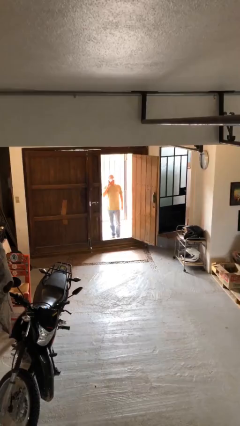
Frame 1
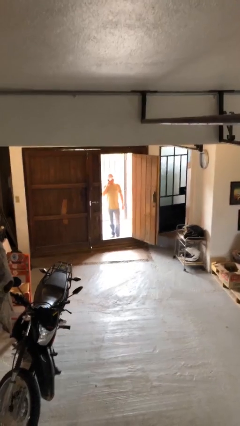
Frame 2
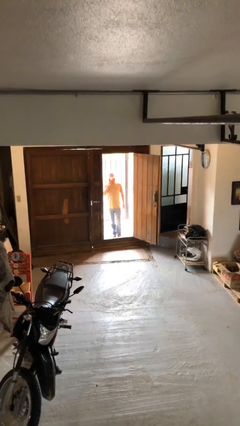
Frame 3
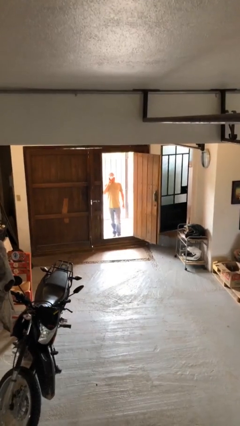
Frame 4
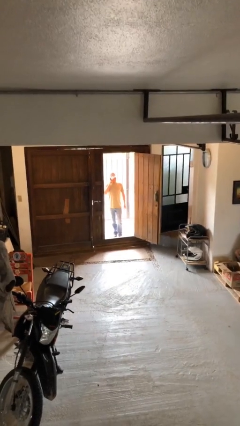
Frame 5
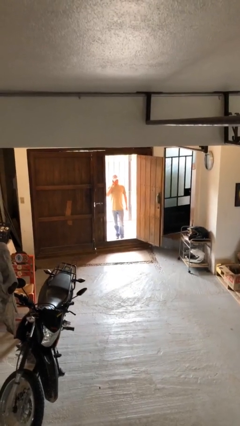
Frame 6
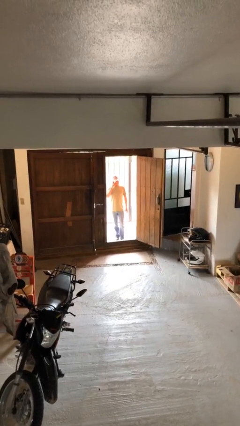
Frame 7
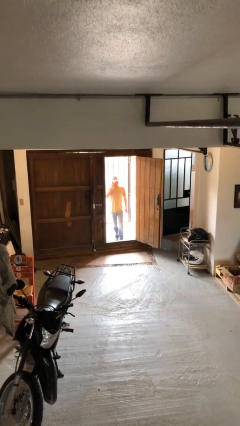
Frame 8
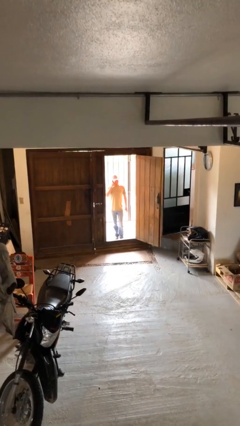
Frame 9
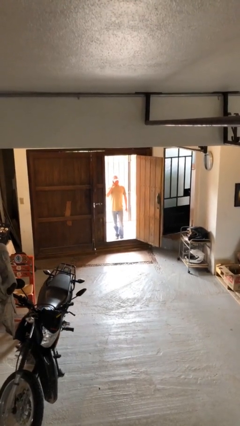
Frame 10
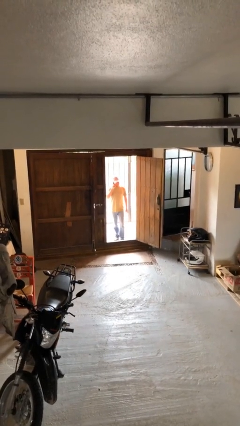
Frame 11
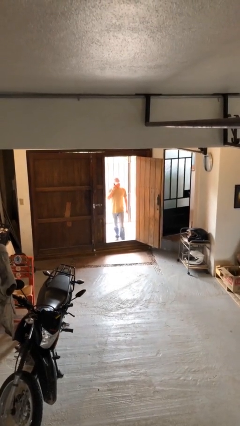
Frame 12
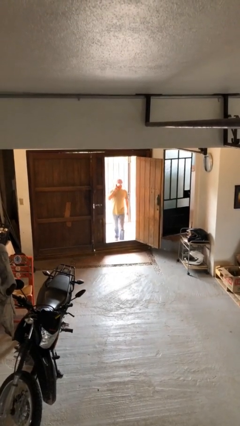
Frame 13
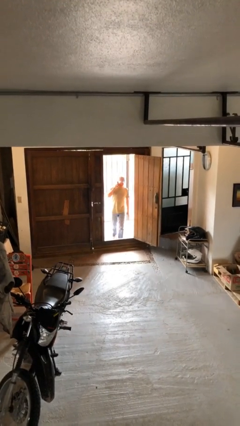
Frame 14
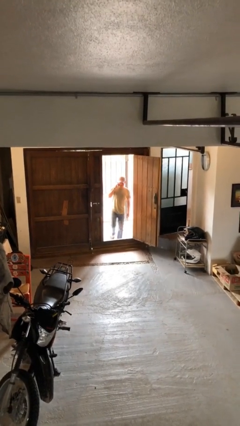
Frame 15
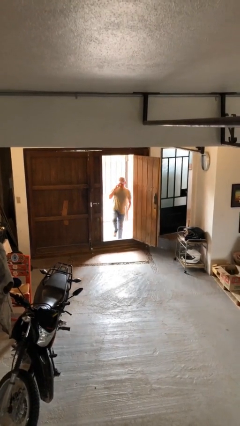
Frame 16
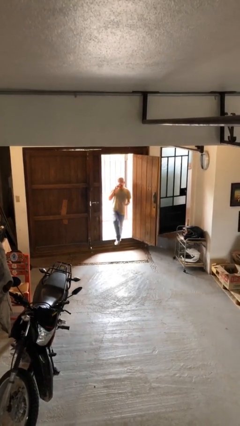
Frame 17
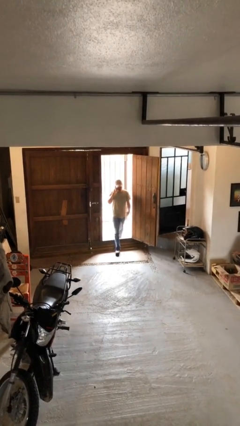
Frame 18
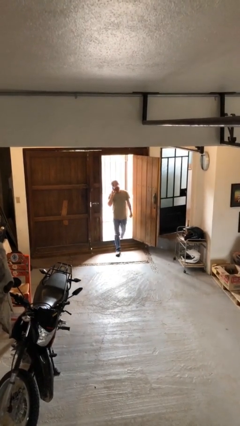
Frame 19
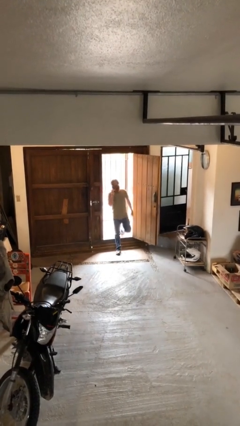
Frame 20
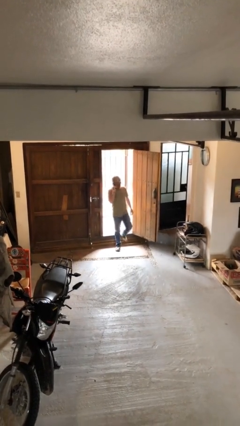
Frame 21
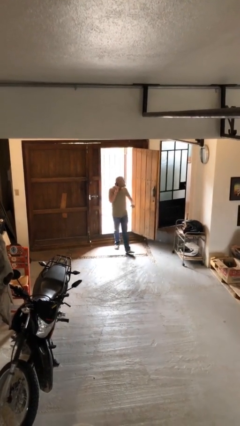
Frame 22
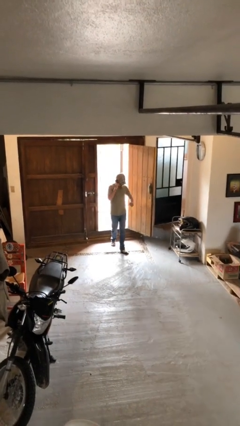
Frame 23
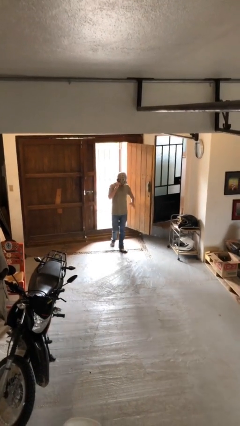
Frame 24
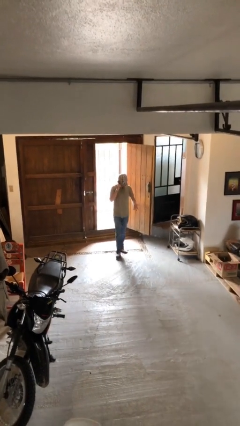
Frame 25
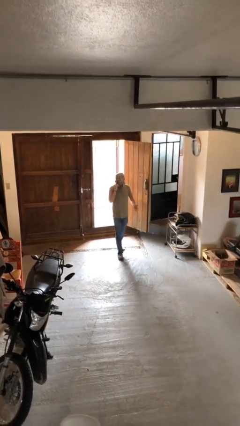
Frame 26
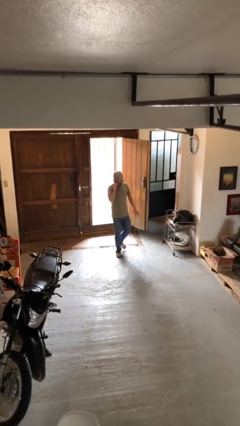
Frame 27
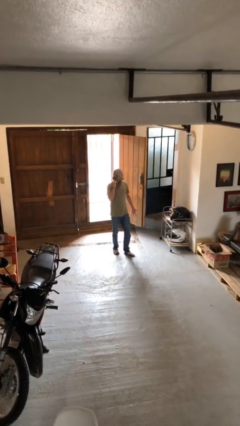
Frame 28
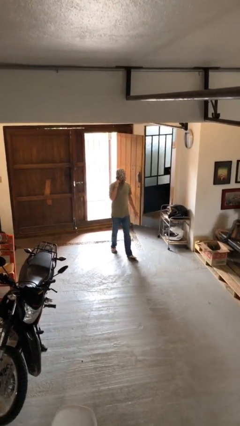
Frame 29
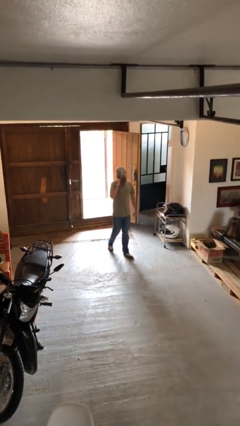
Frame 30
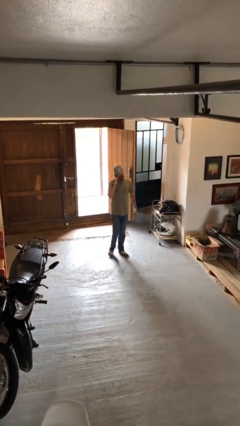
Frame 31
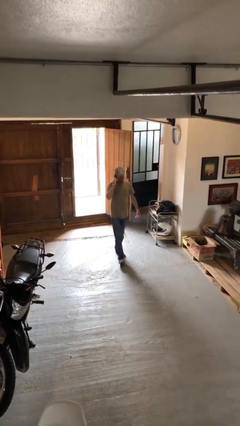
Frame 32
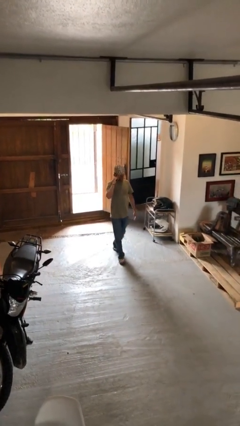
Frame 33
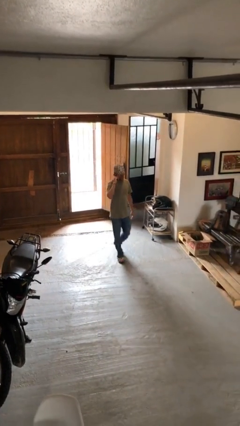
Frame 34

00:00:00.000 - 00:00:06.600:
person enters scene through structure

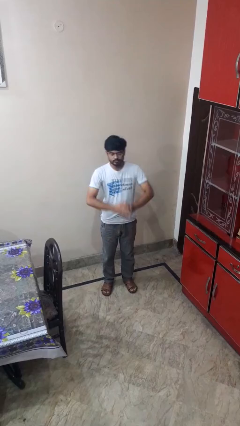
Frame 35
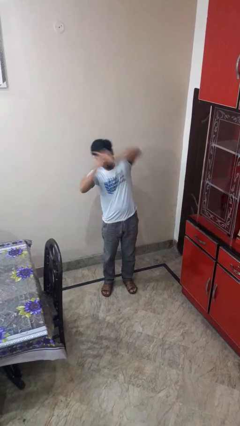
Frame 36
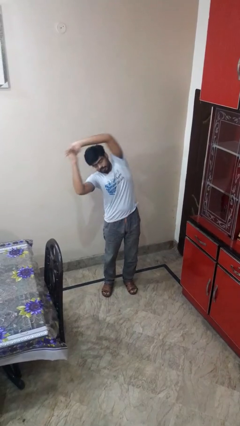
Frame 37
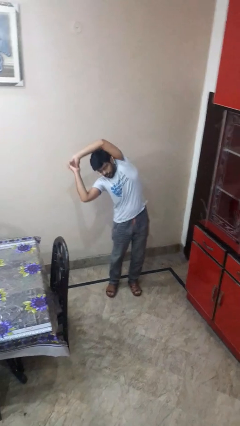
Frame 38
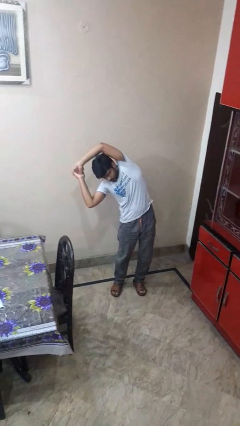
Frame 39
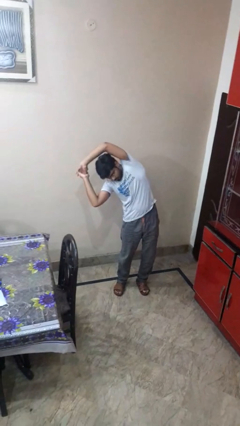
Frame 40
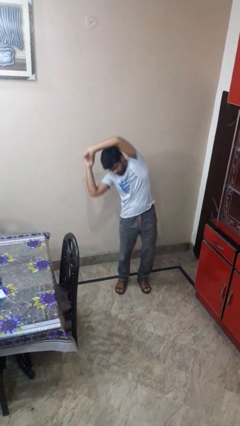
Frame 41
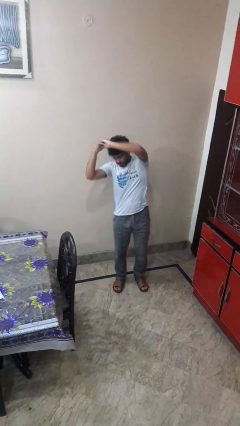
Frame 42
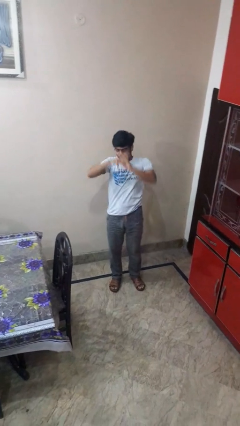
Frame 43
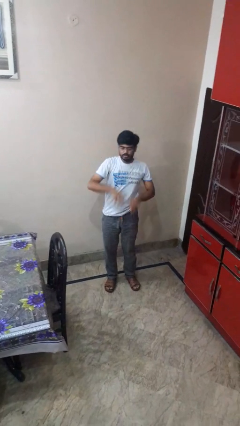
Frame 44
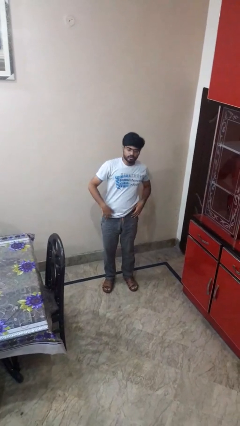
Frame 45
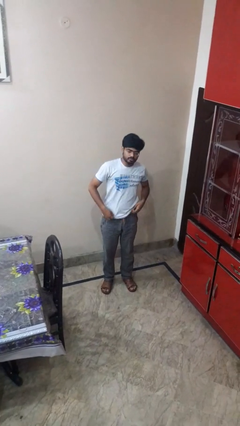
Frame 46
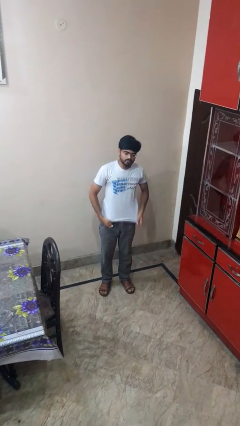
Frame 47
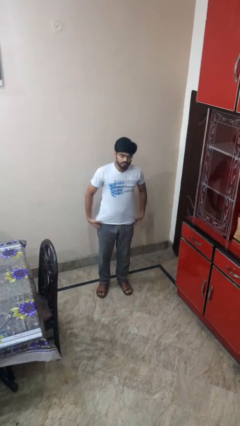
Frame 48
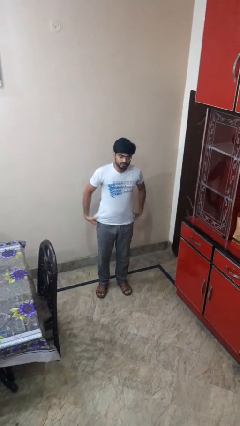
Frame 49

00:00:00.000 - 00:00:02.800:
person stretches arms to side

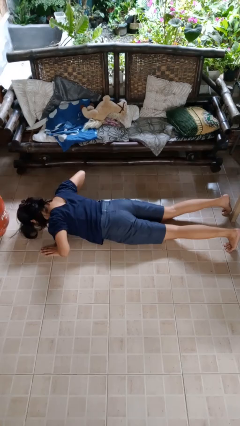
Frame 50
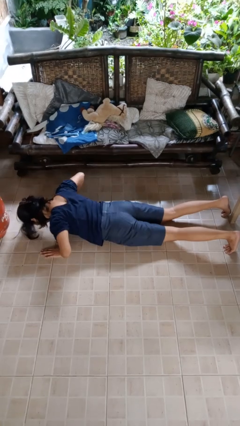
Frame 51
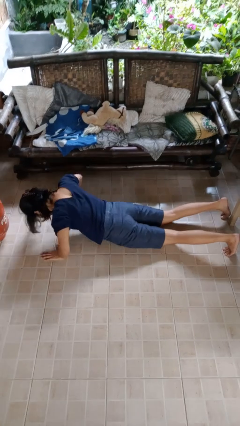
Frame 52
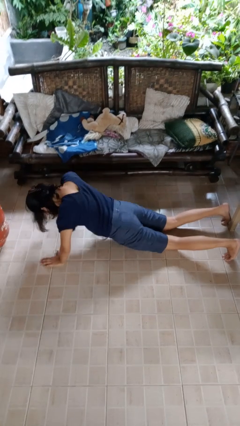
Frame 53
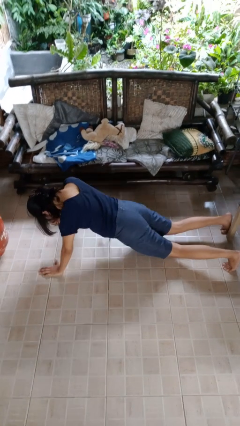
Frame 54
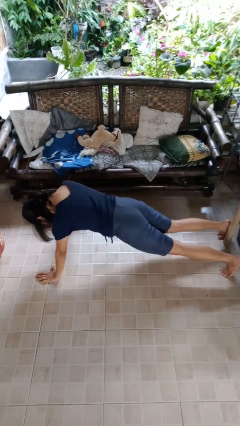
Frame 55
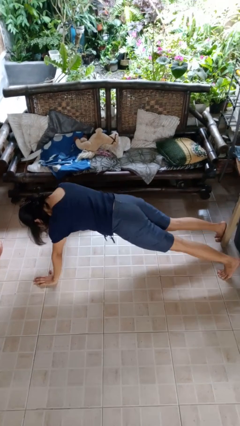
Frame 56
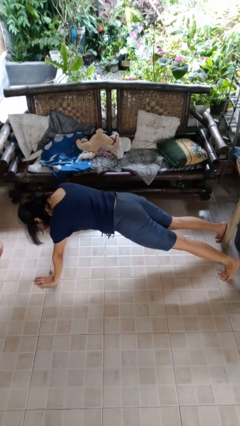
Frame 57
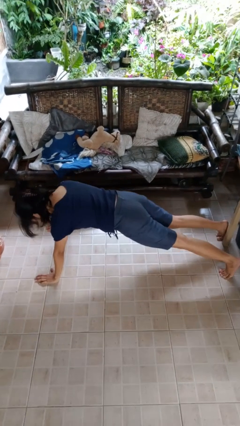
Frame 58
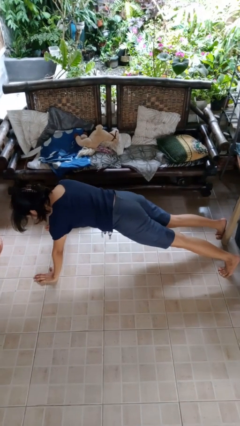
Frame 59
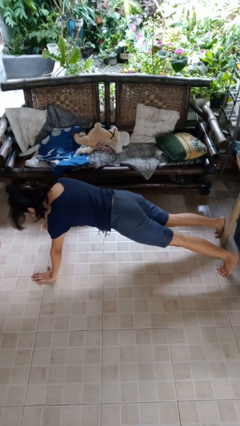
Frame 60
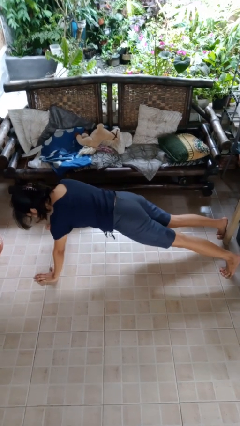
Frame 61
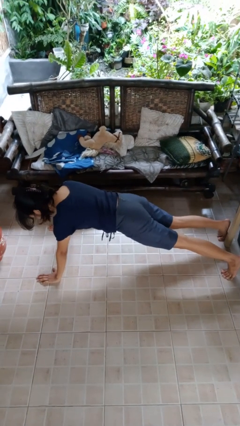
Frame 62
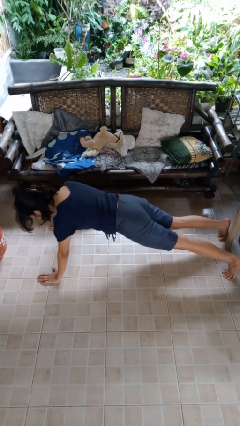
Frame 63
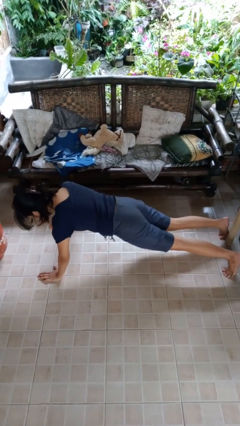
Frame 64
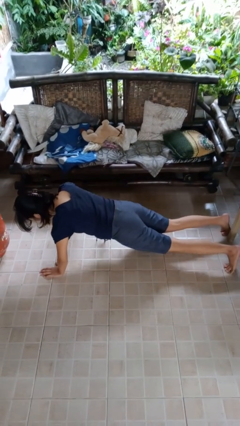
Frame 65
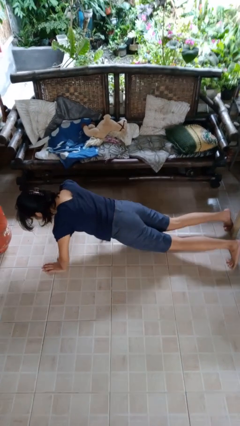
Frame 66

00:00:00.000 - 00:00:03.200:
person exercises with pushup

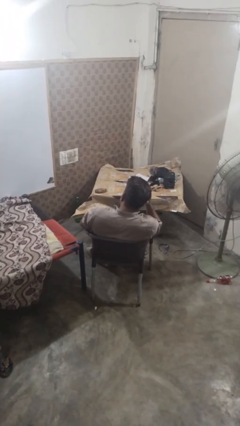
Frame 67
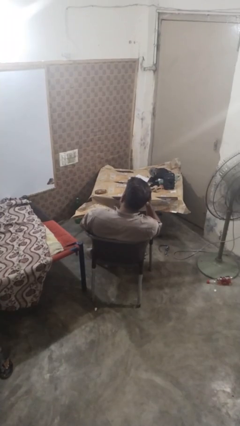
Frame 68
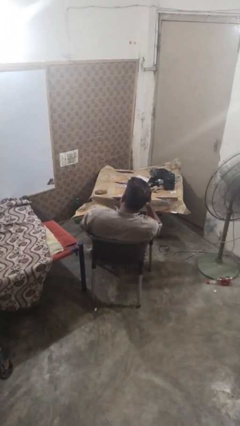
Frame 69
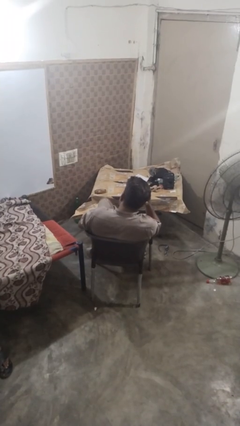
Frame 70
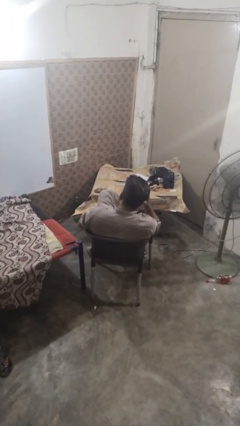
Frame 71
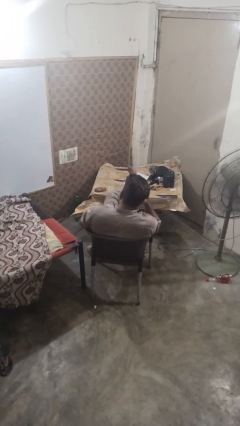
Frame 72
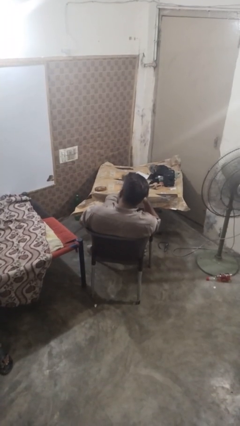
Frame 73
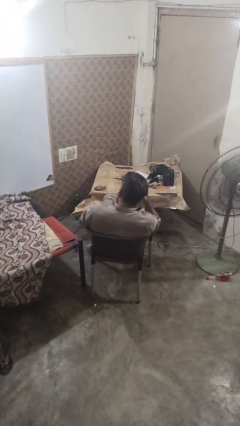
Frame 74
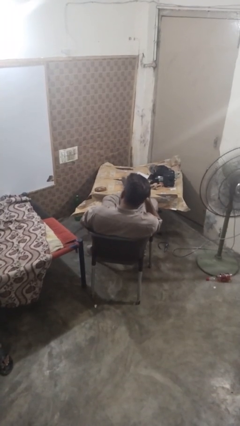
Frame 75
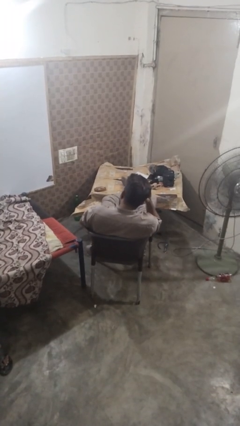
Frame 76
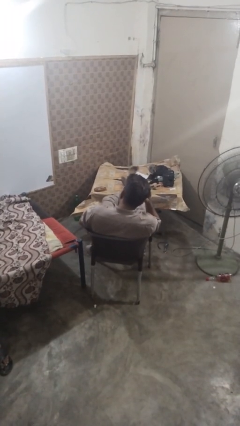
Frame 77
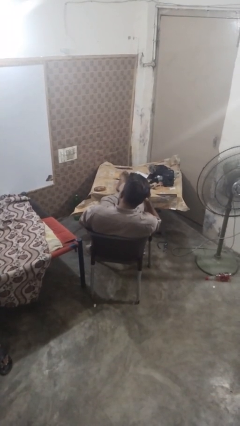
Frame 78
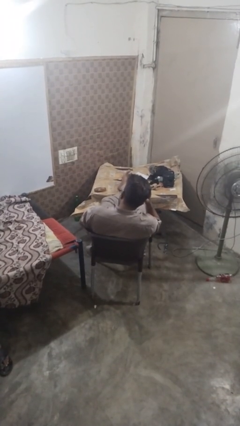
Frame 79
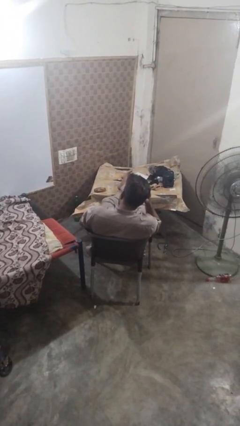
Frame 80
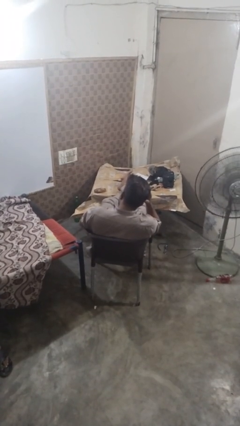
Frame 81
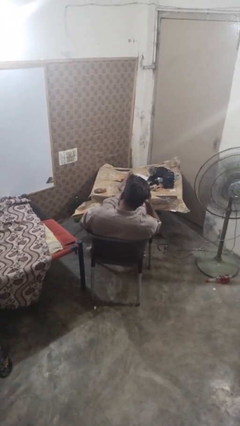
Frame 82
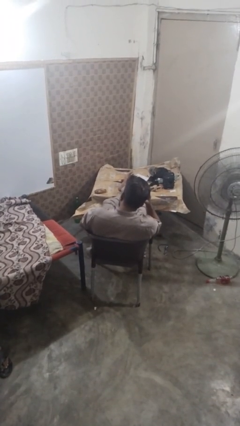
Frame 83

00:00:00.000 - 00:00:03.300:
person puts feet up

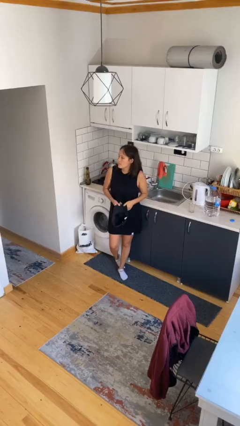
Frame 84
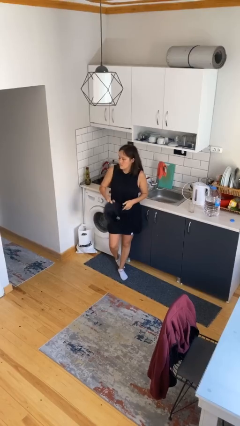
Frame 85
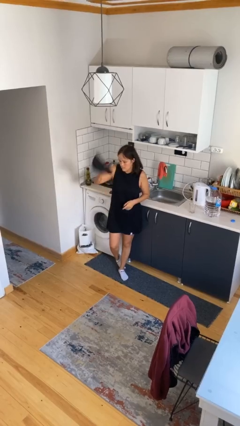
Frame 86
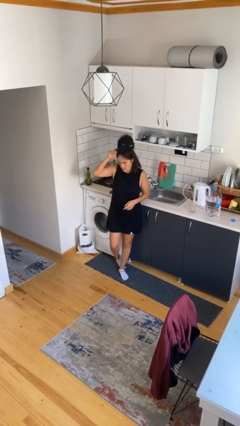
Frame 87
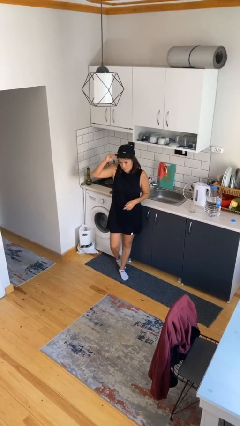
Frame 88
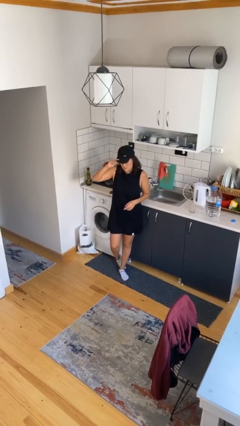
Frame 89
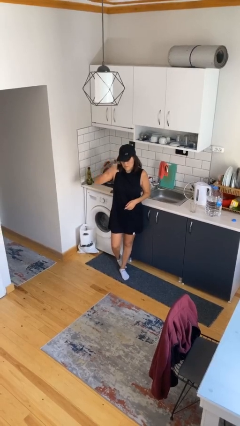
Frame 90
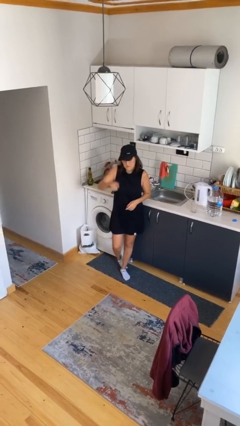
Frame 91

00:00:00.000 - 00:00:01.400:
person puts on hat

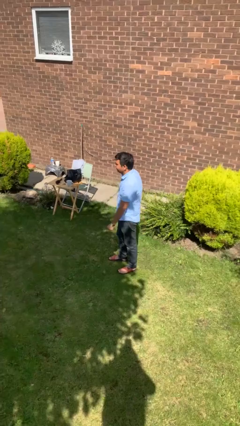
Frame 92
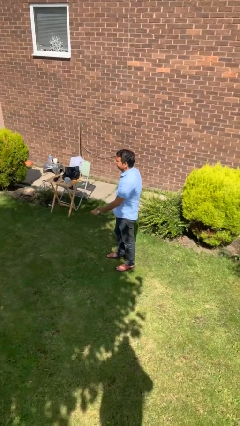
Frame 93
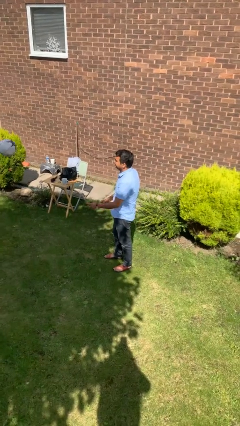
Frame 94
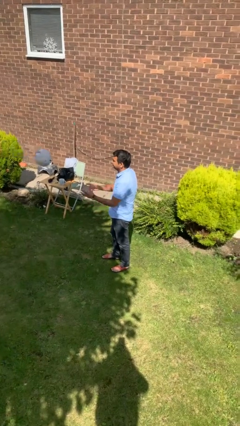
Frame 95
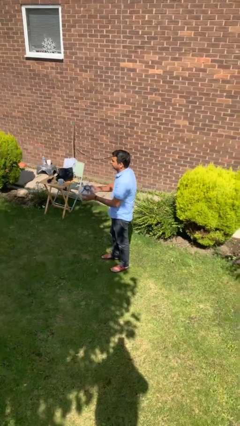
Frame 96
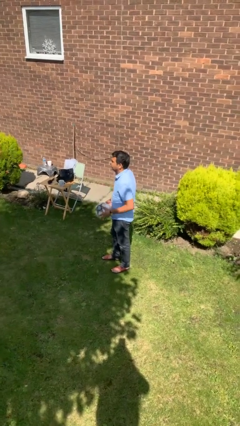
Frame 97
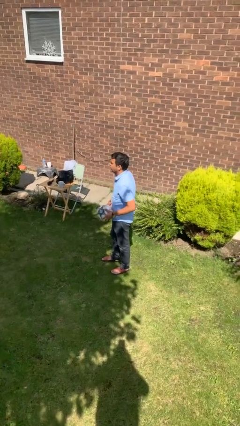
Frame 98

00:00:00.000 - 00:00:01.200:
person catches object from person
